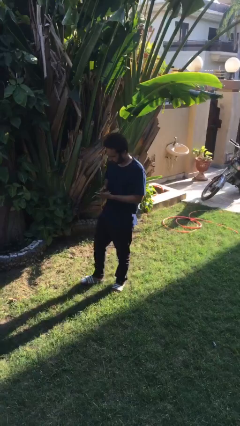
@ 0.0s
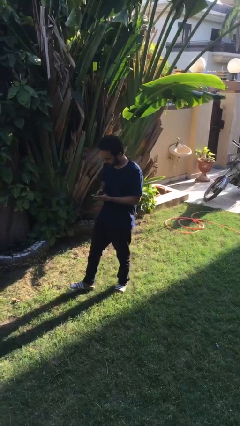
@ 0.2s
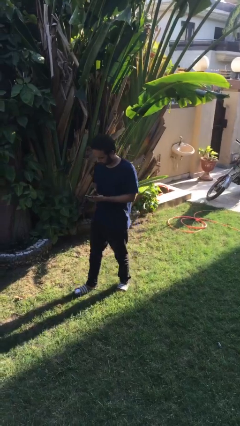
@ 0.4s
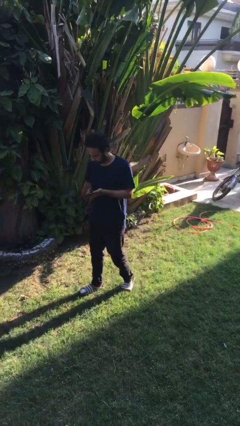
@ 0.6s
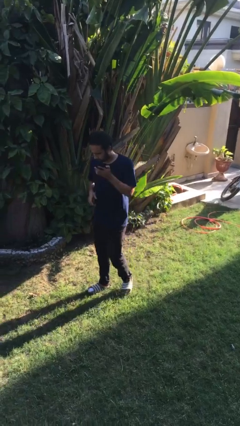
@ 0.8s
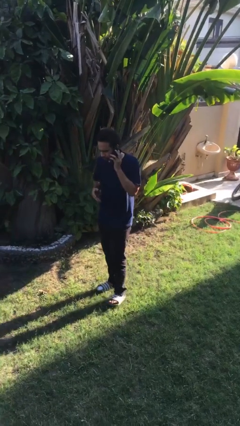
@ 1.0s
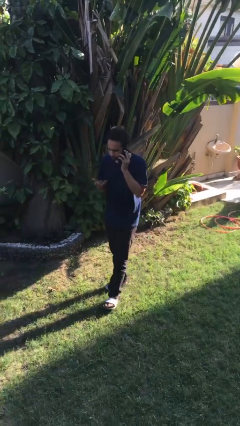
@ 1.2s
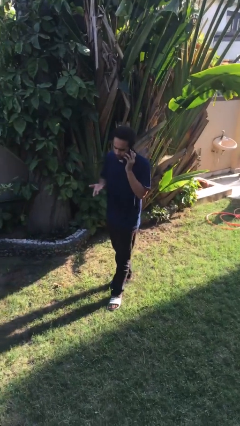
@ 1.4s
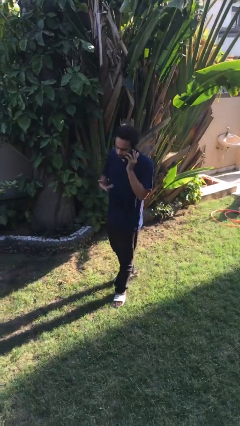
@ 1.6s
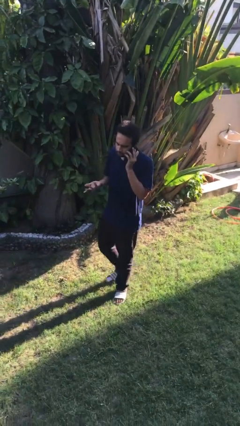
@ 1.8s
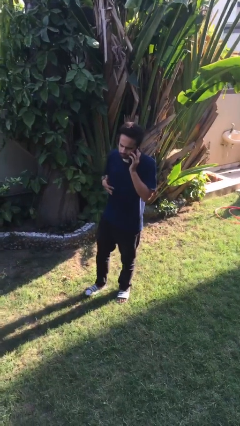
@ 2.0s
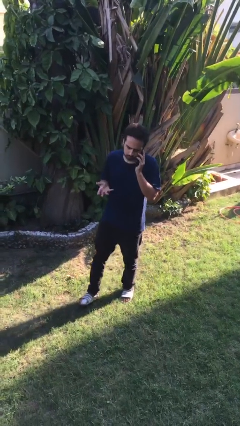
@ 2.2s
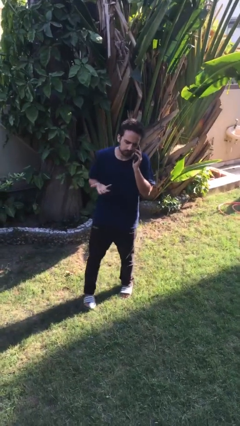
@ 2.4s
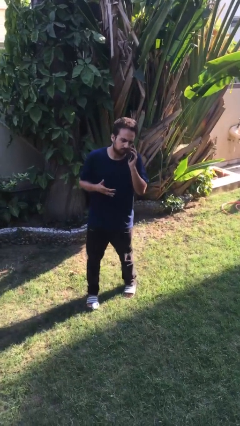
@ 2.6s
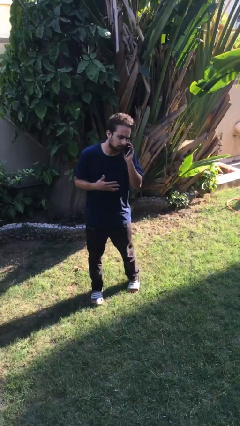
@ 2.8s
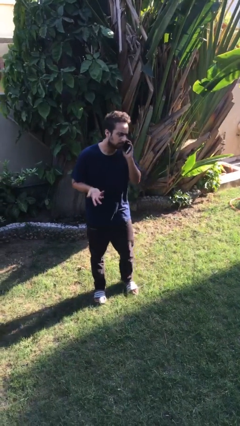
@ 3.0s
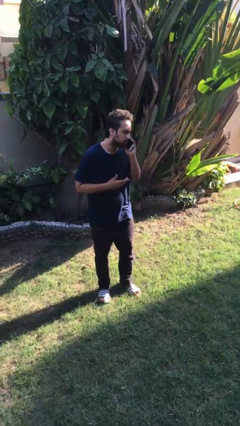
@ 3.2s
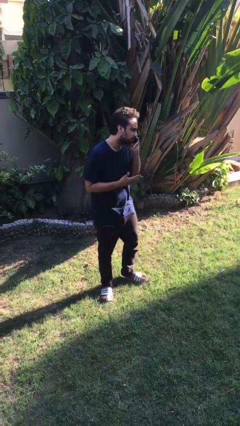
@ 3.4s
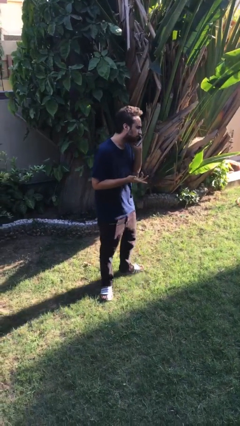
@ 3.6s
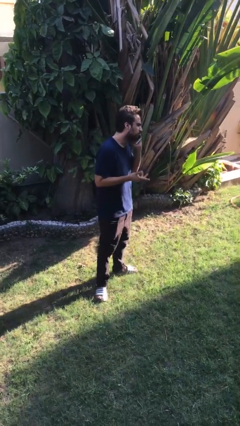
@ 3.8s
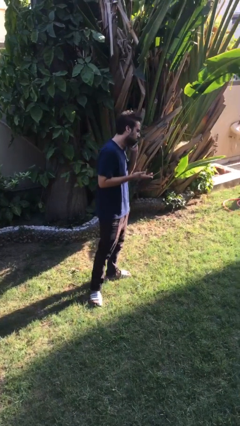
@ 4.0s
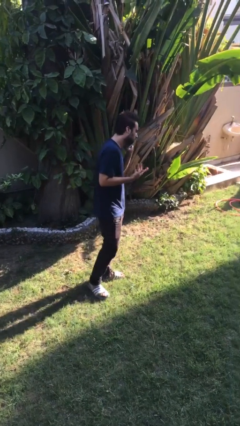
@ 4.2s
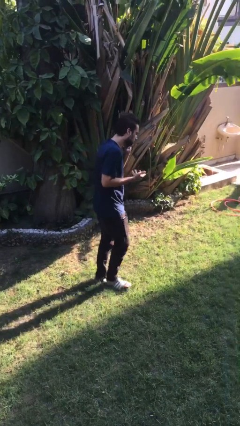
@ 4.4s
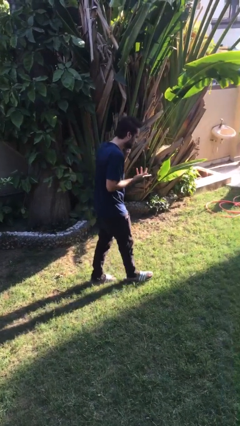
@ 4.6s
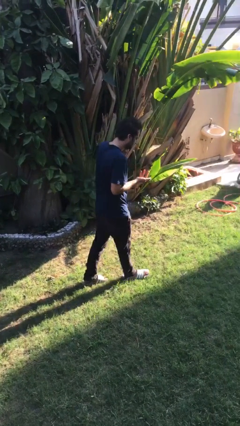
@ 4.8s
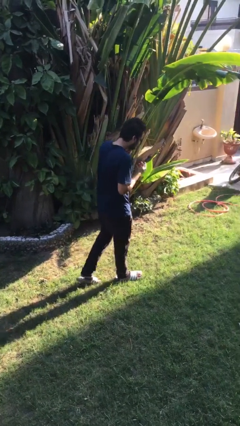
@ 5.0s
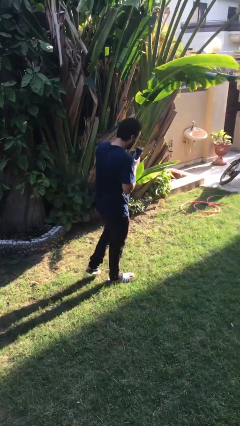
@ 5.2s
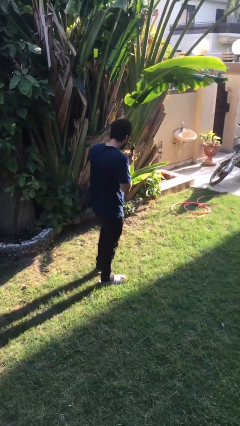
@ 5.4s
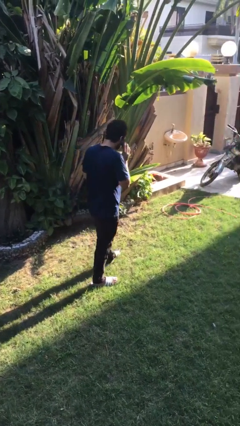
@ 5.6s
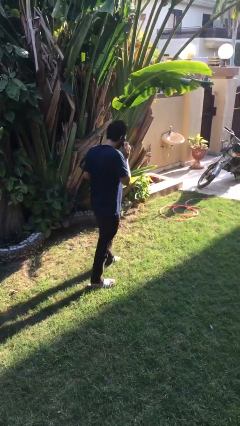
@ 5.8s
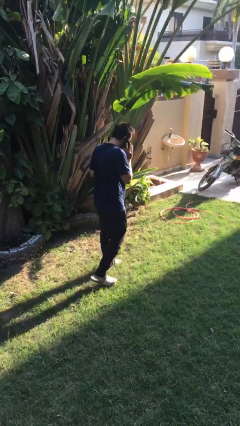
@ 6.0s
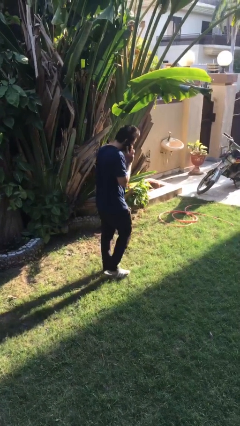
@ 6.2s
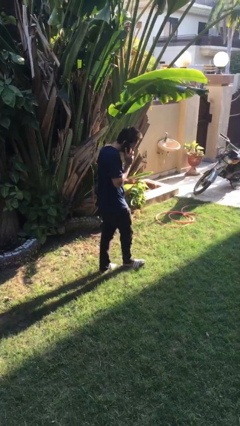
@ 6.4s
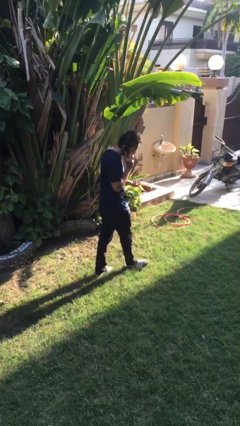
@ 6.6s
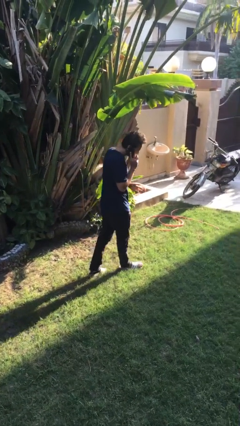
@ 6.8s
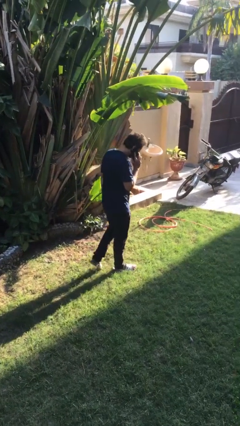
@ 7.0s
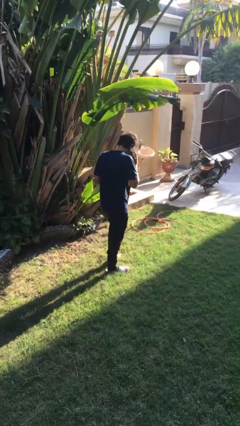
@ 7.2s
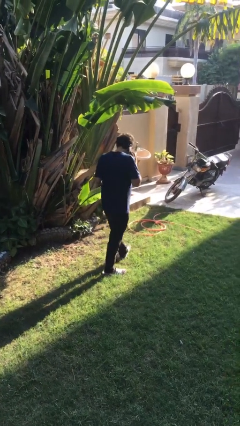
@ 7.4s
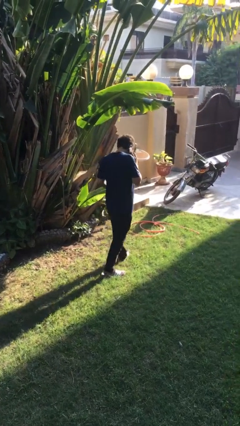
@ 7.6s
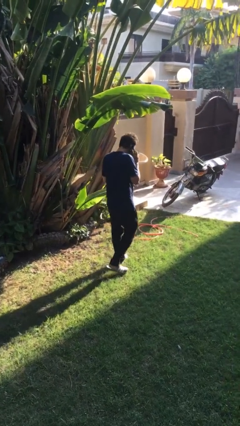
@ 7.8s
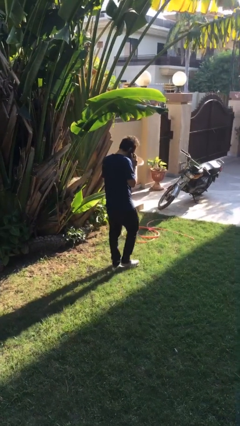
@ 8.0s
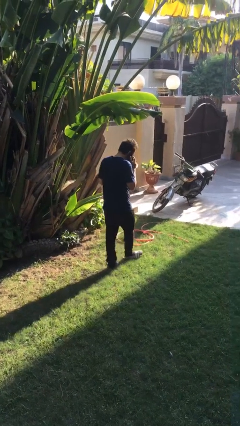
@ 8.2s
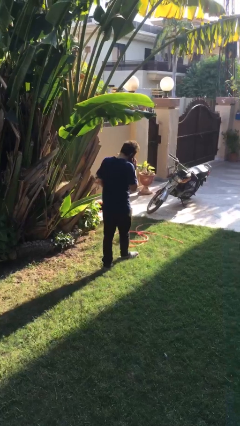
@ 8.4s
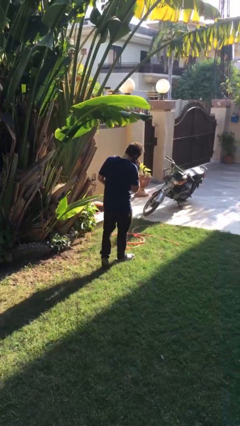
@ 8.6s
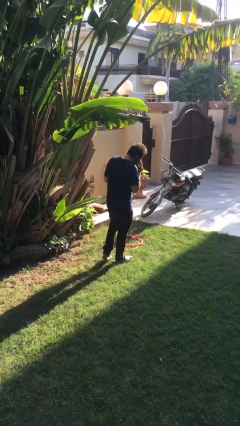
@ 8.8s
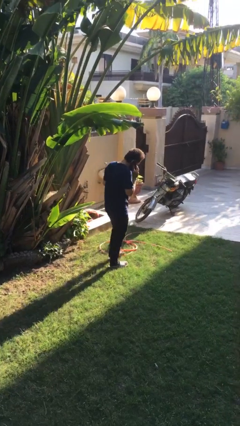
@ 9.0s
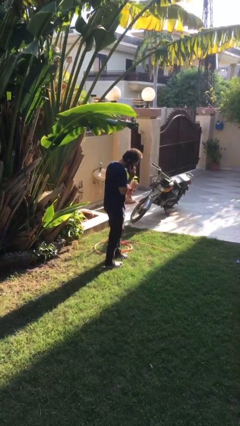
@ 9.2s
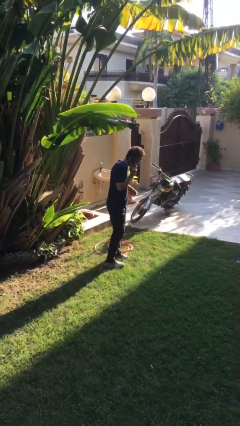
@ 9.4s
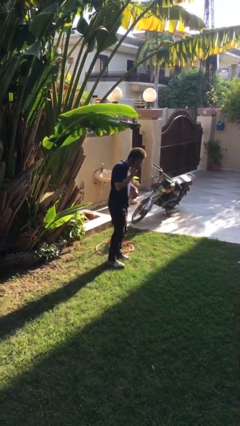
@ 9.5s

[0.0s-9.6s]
person talks on phone

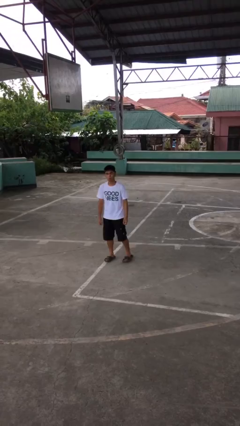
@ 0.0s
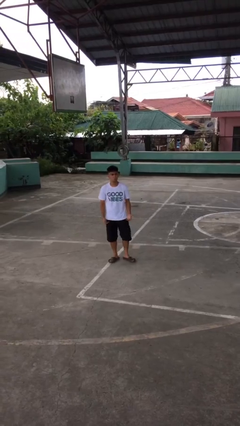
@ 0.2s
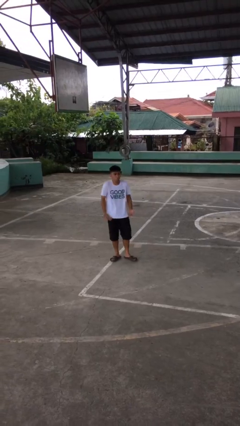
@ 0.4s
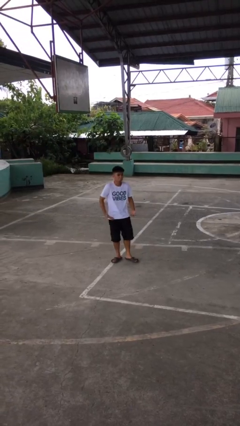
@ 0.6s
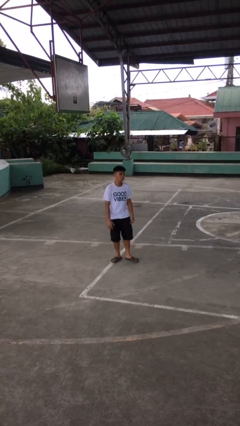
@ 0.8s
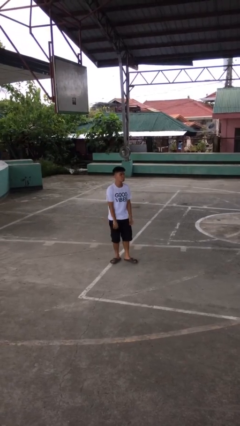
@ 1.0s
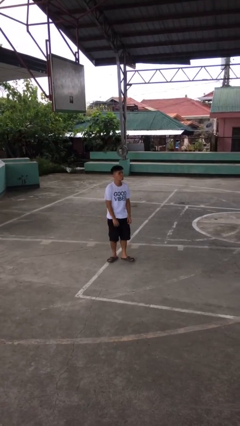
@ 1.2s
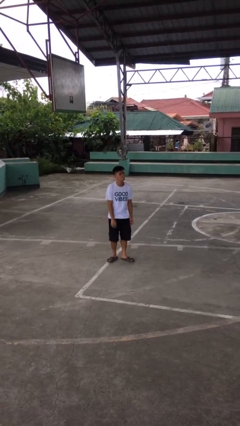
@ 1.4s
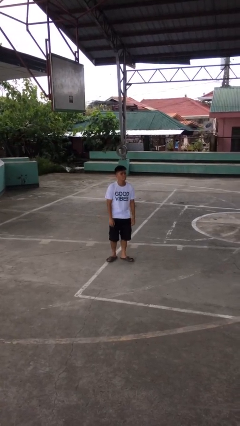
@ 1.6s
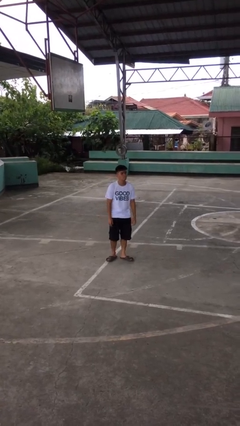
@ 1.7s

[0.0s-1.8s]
person shrugs

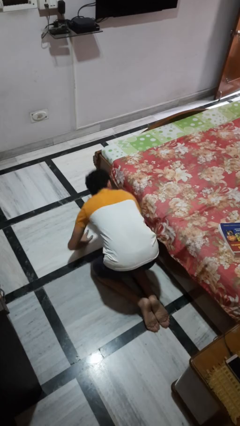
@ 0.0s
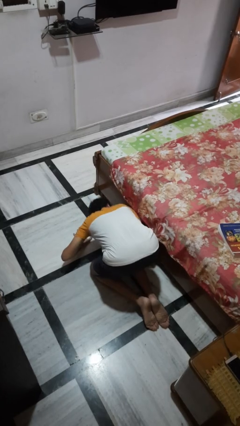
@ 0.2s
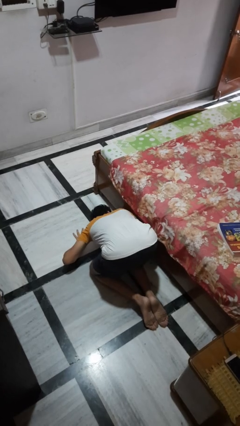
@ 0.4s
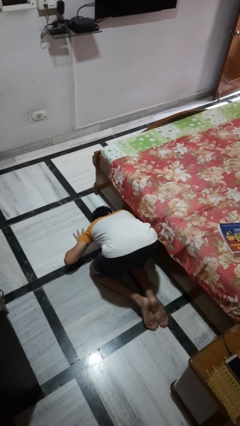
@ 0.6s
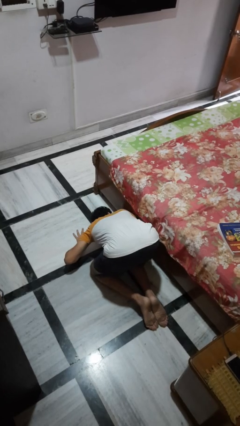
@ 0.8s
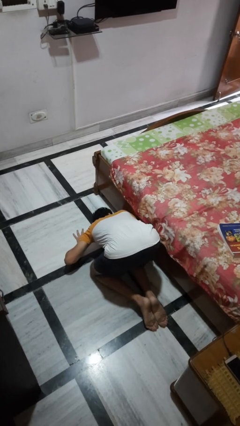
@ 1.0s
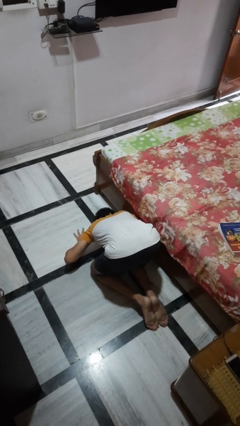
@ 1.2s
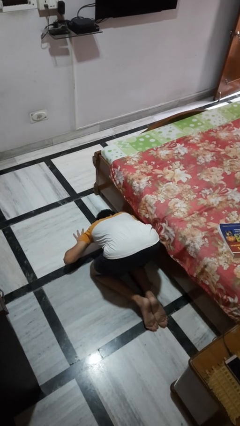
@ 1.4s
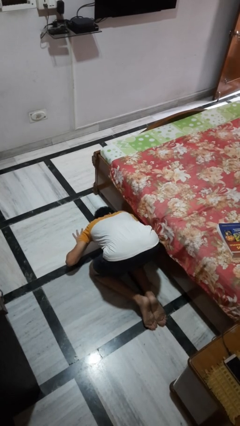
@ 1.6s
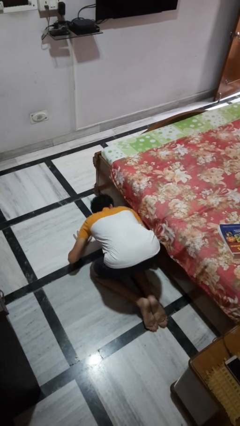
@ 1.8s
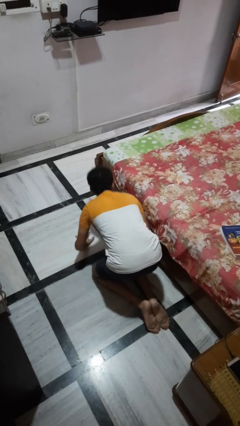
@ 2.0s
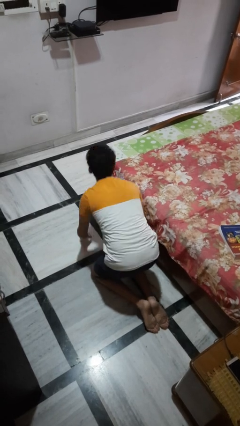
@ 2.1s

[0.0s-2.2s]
person searches under bed

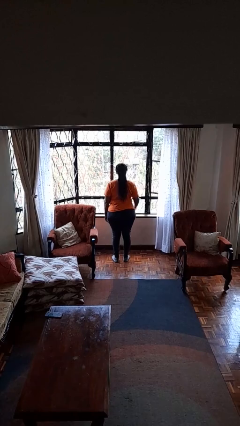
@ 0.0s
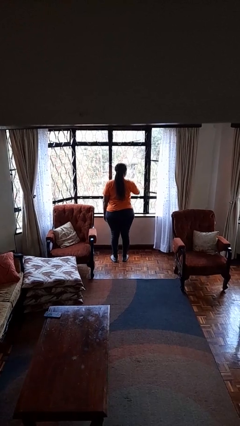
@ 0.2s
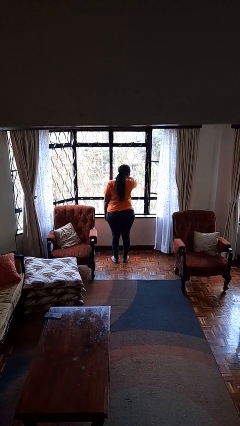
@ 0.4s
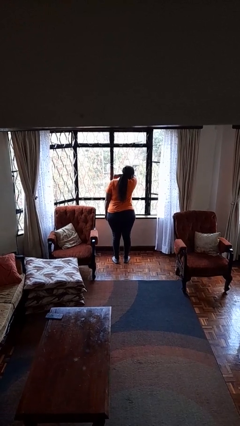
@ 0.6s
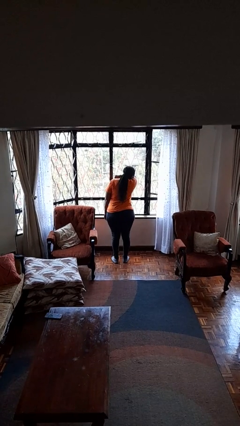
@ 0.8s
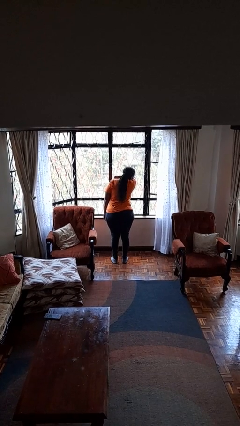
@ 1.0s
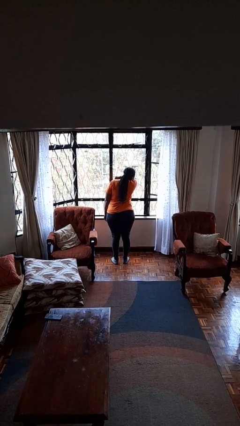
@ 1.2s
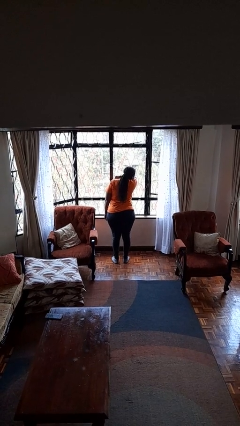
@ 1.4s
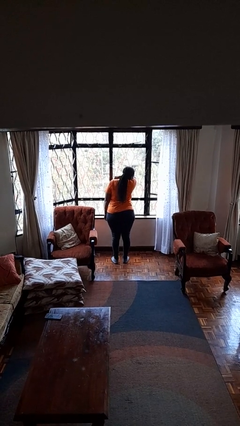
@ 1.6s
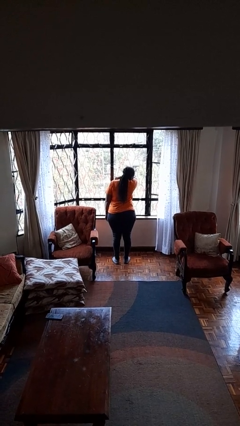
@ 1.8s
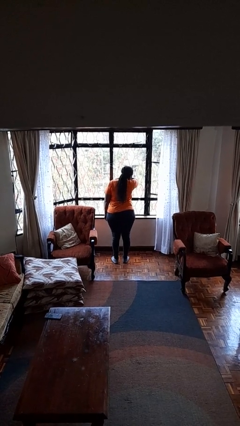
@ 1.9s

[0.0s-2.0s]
person sneezes into arm

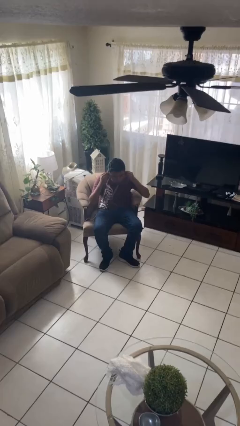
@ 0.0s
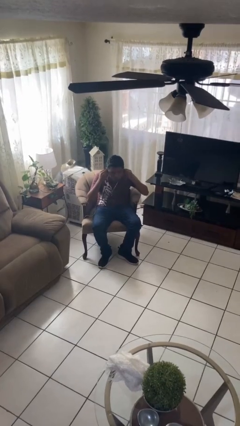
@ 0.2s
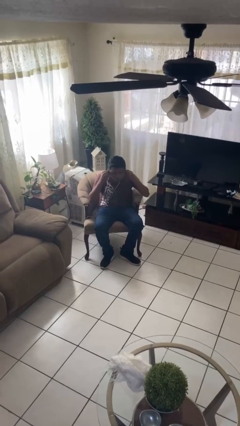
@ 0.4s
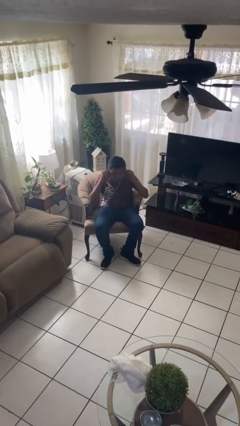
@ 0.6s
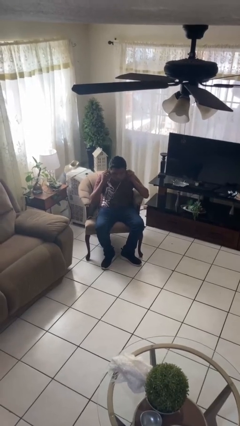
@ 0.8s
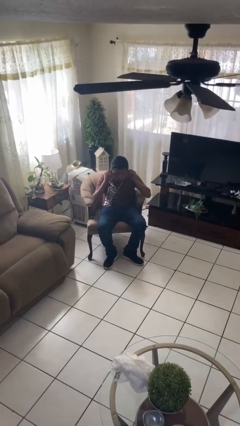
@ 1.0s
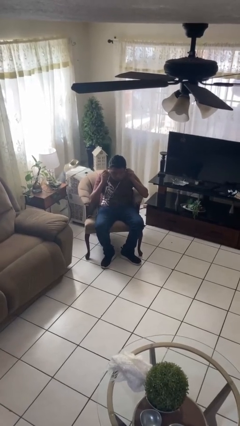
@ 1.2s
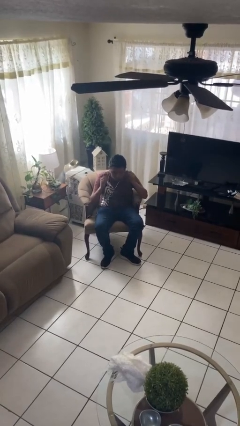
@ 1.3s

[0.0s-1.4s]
person puts on headphones

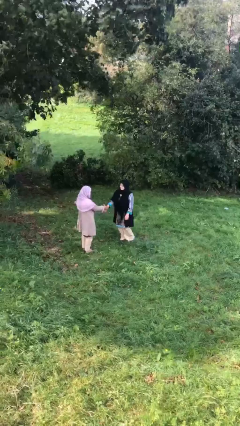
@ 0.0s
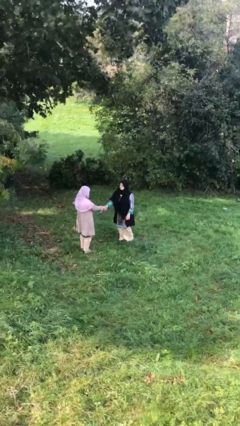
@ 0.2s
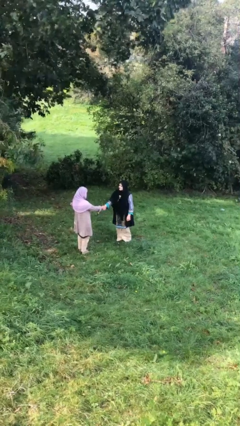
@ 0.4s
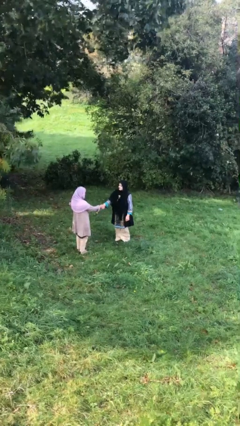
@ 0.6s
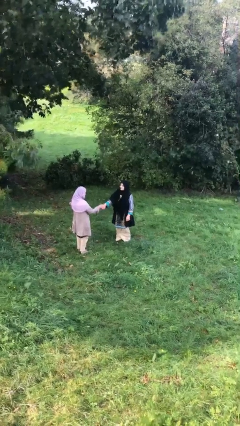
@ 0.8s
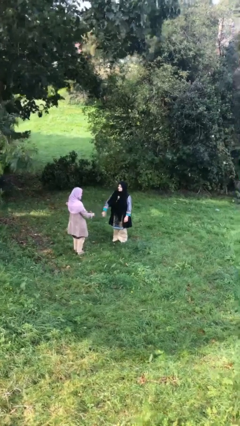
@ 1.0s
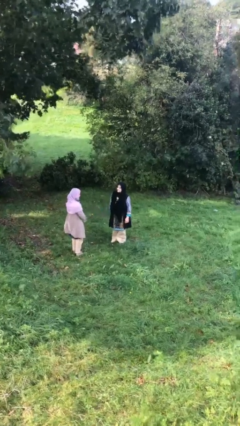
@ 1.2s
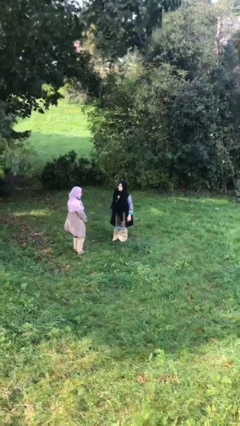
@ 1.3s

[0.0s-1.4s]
person shakes hand
